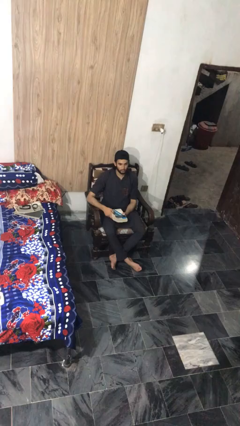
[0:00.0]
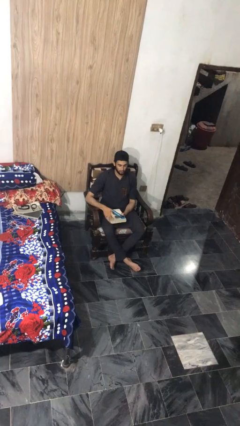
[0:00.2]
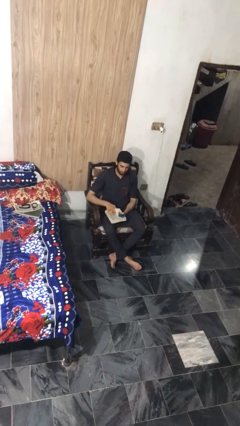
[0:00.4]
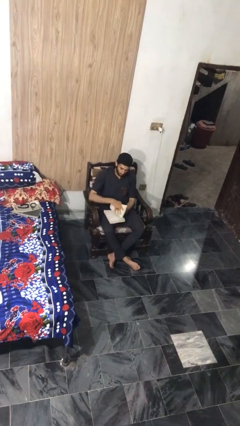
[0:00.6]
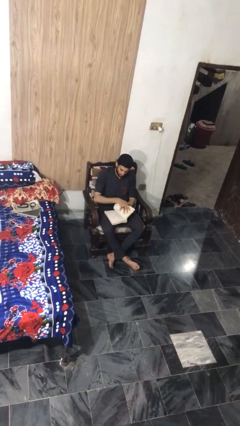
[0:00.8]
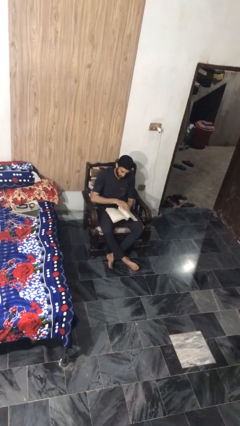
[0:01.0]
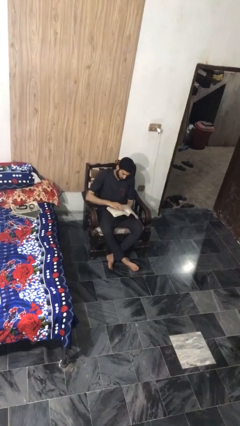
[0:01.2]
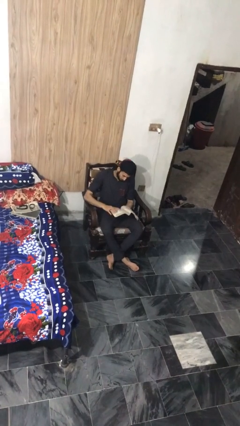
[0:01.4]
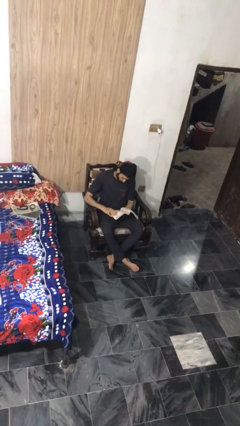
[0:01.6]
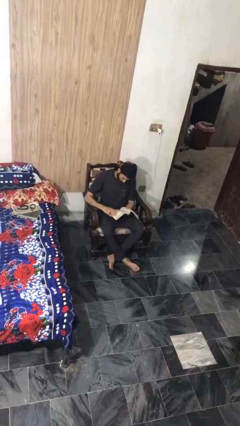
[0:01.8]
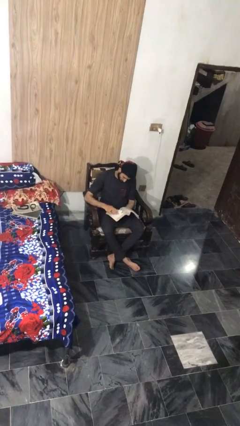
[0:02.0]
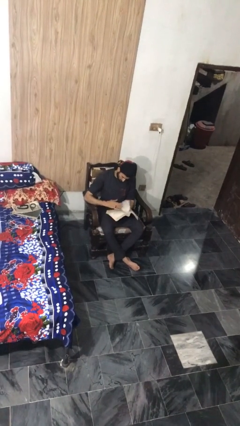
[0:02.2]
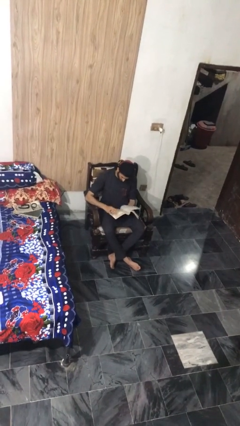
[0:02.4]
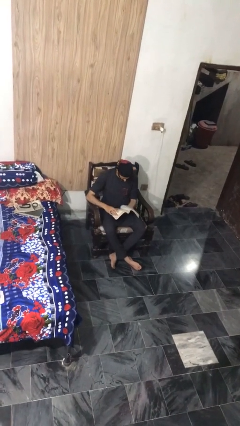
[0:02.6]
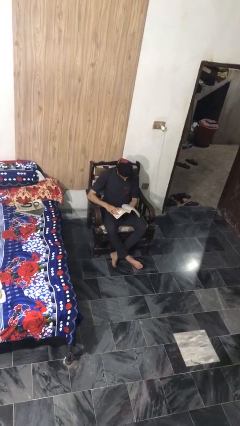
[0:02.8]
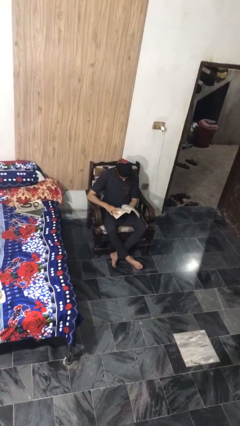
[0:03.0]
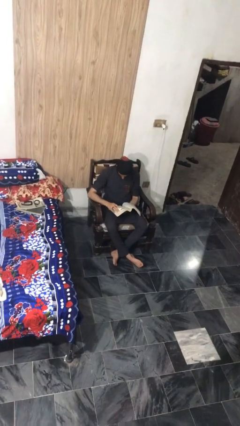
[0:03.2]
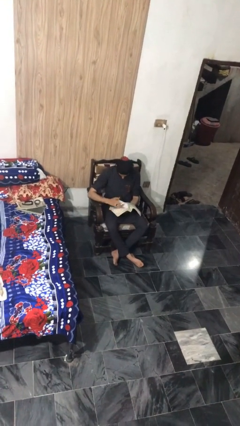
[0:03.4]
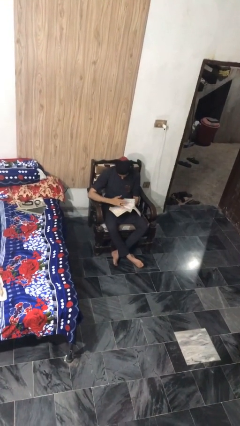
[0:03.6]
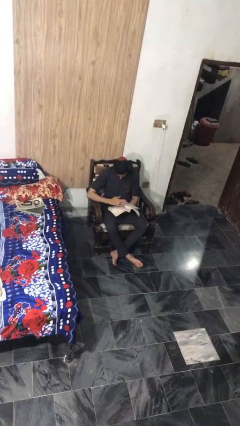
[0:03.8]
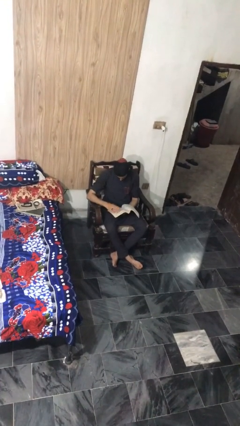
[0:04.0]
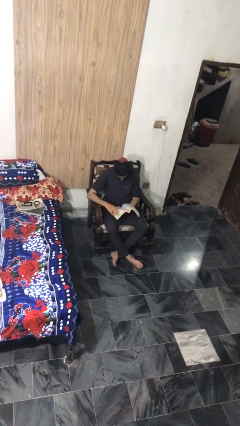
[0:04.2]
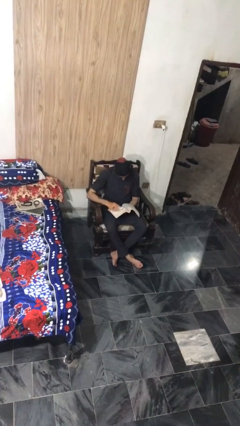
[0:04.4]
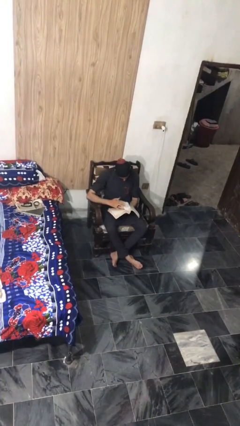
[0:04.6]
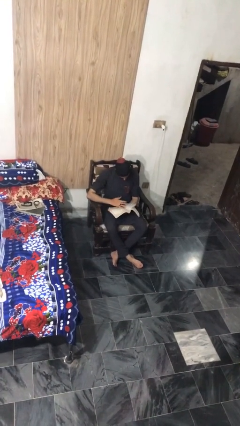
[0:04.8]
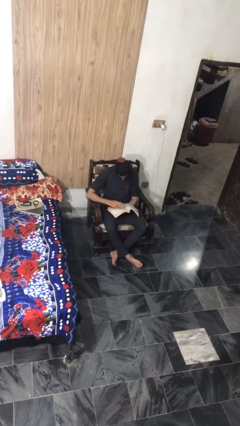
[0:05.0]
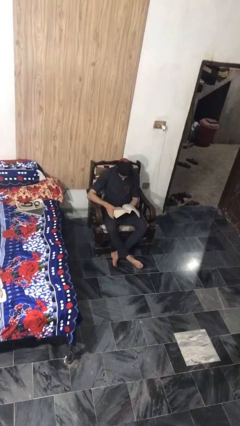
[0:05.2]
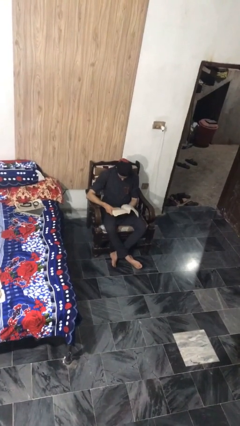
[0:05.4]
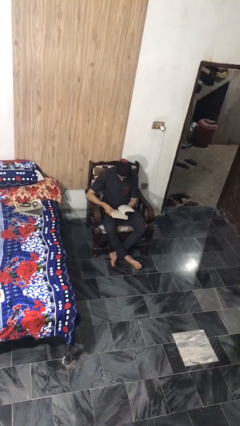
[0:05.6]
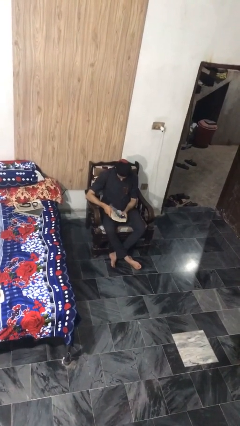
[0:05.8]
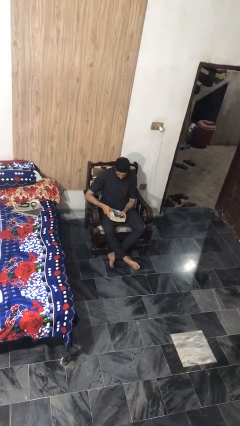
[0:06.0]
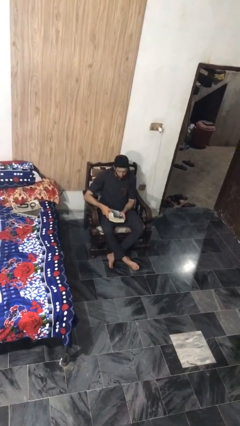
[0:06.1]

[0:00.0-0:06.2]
person reads book

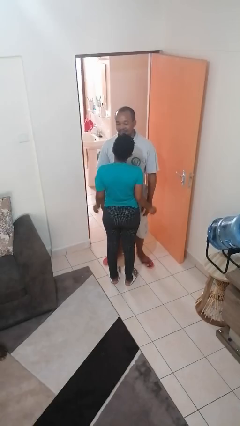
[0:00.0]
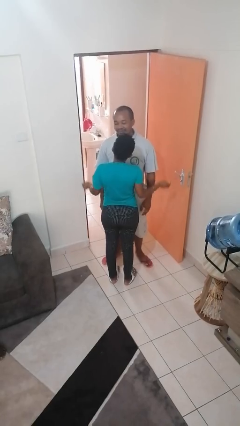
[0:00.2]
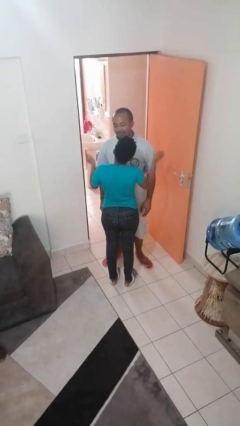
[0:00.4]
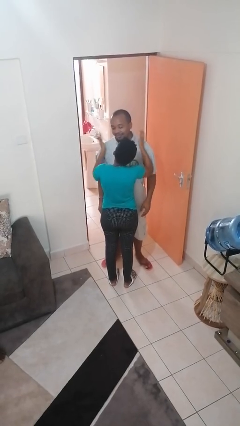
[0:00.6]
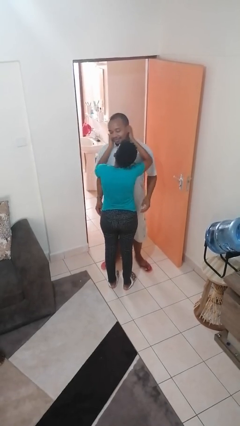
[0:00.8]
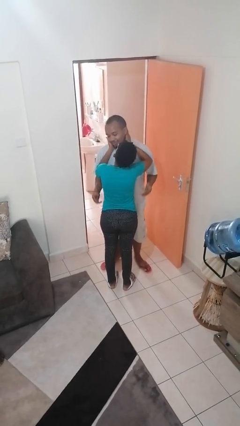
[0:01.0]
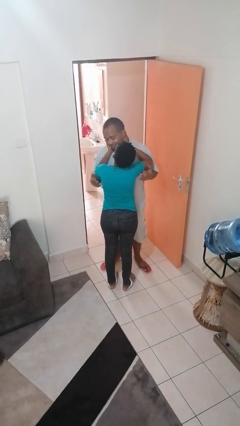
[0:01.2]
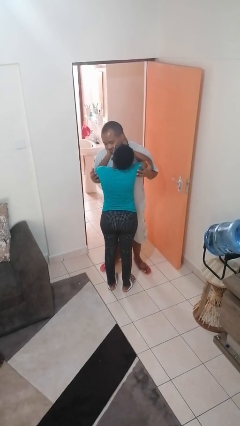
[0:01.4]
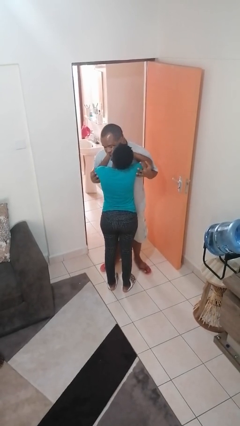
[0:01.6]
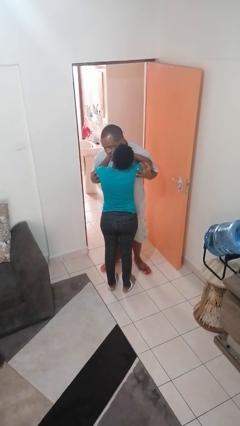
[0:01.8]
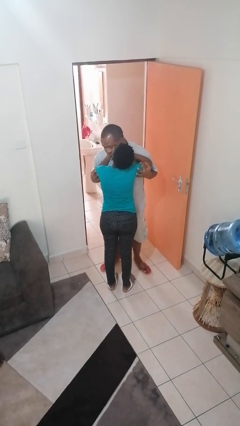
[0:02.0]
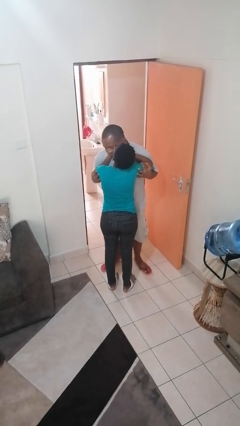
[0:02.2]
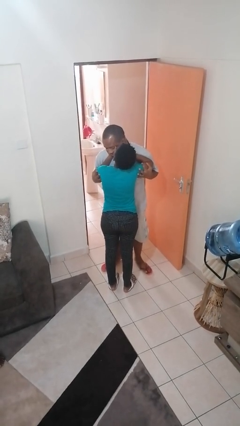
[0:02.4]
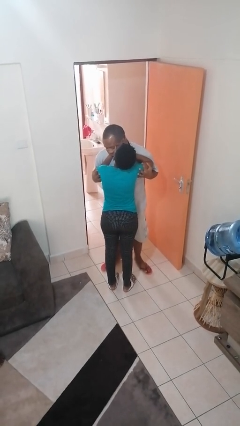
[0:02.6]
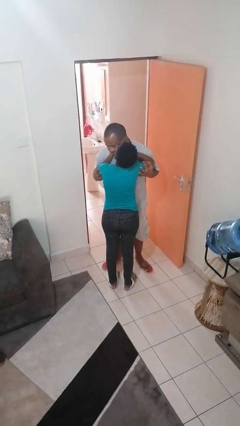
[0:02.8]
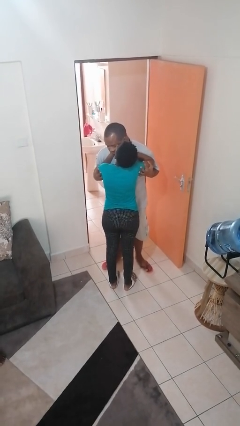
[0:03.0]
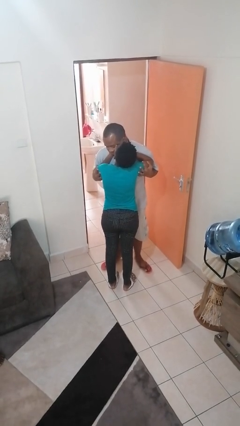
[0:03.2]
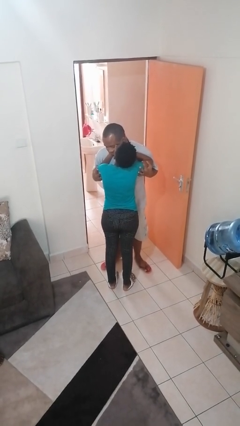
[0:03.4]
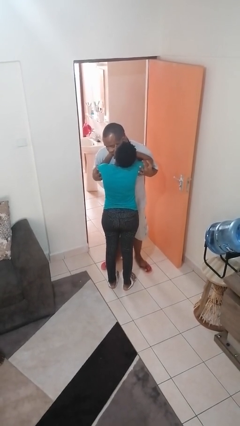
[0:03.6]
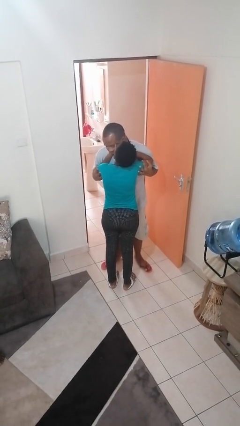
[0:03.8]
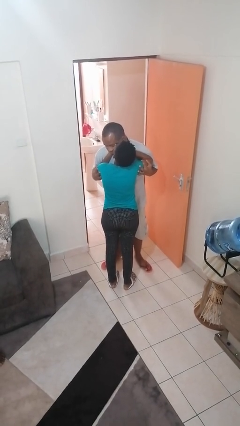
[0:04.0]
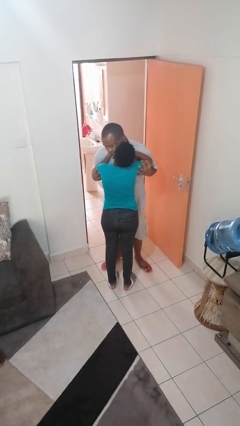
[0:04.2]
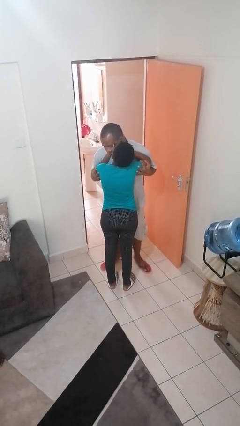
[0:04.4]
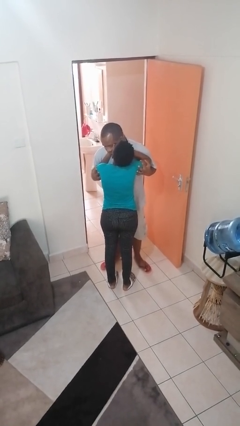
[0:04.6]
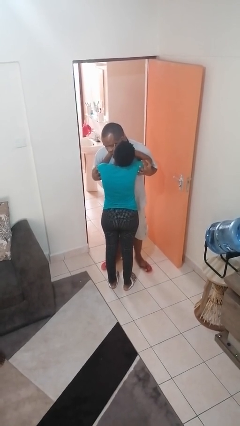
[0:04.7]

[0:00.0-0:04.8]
person kisses cheek of person

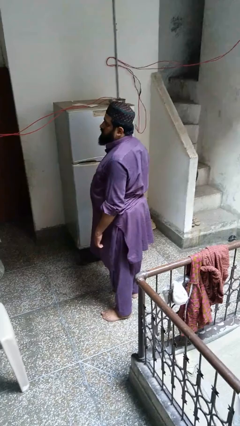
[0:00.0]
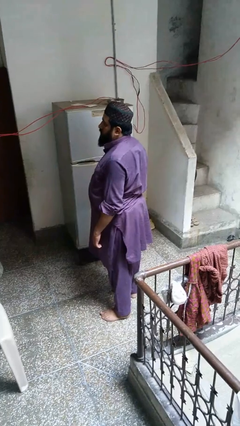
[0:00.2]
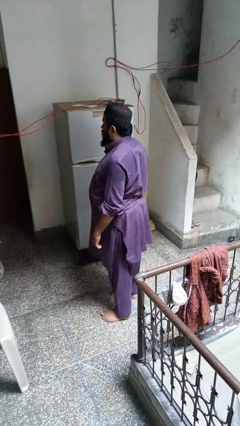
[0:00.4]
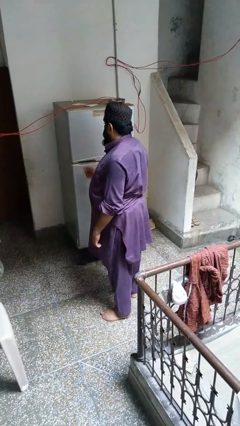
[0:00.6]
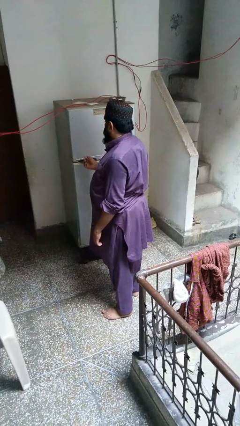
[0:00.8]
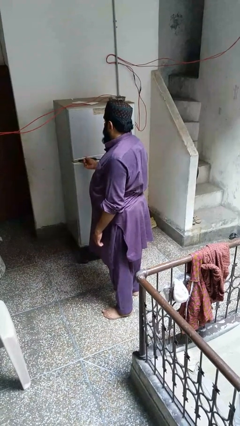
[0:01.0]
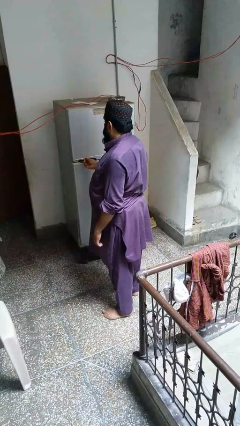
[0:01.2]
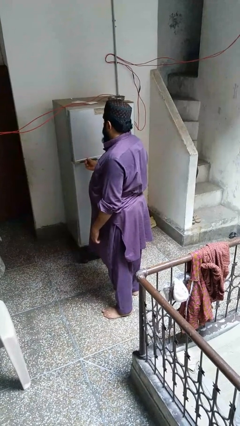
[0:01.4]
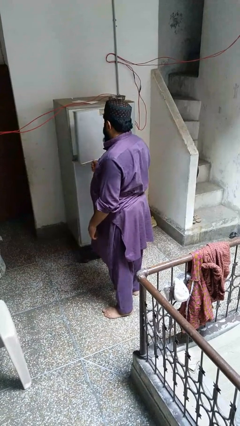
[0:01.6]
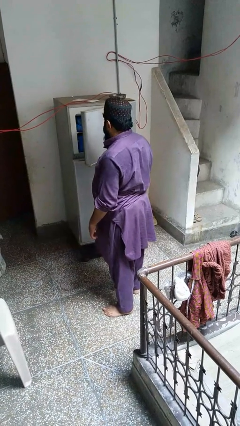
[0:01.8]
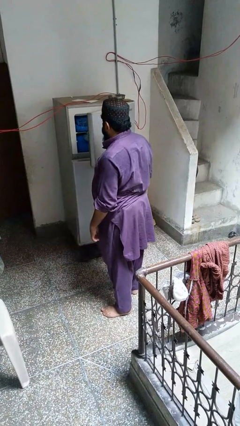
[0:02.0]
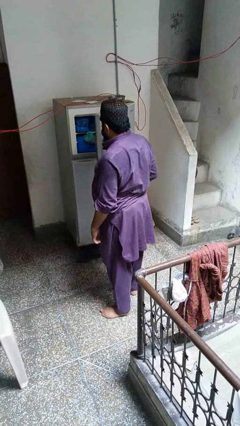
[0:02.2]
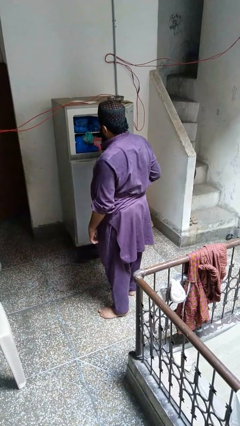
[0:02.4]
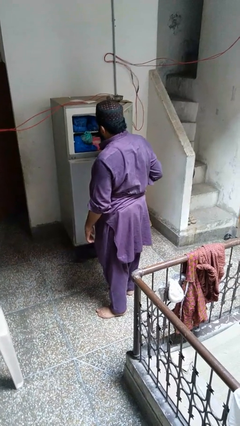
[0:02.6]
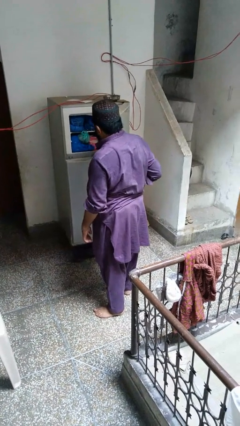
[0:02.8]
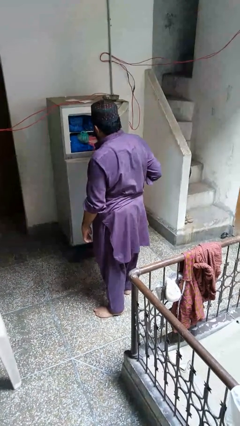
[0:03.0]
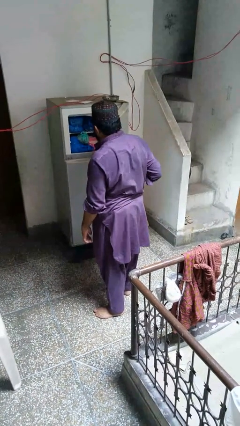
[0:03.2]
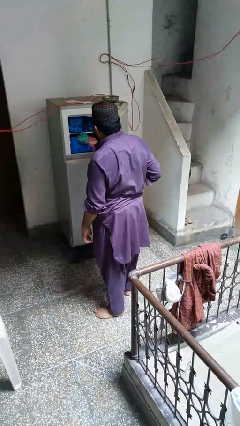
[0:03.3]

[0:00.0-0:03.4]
person opens refrigerator

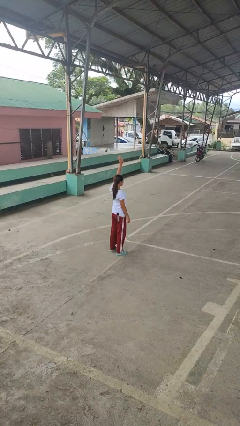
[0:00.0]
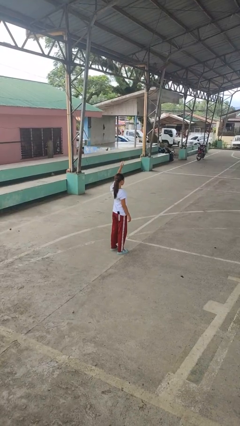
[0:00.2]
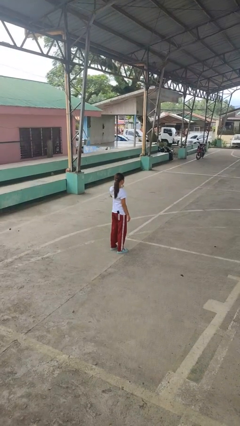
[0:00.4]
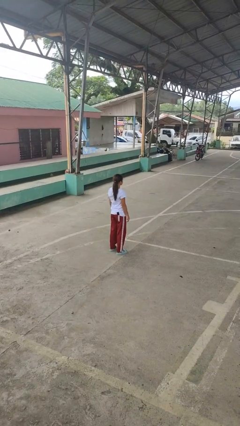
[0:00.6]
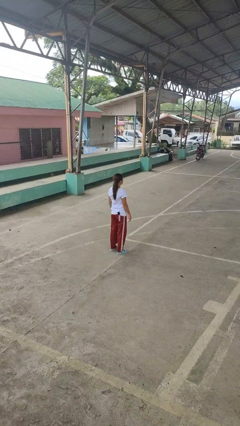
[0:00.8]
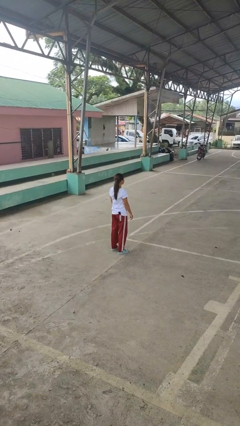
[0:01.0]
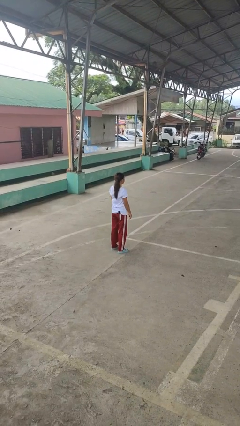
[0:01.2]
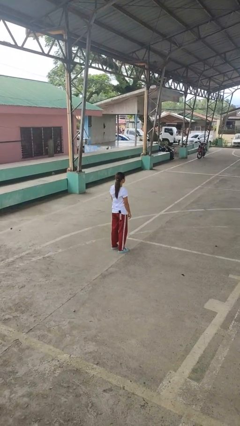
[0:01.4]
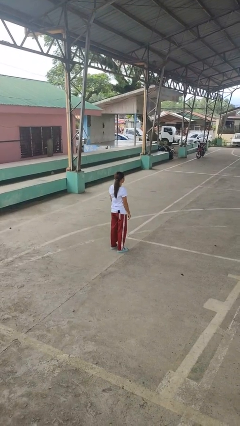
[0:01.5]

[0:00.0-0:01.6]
person gestures lower hand

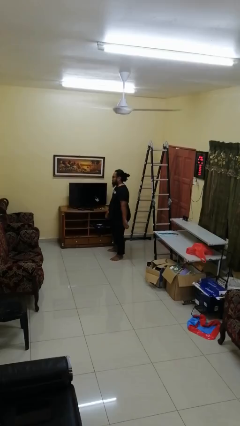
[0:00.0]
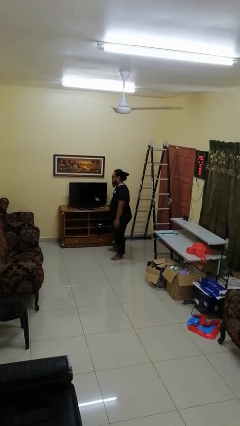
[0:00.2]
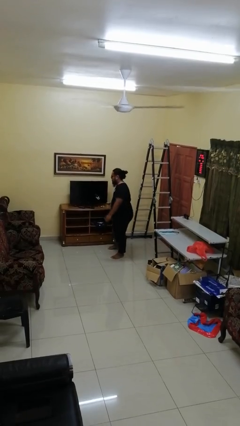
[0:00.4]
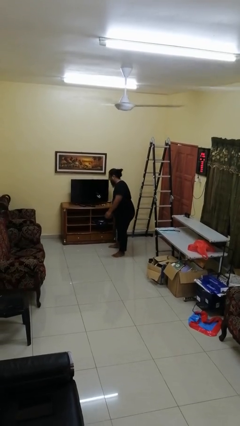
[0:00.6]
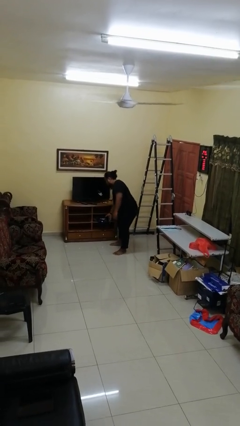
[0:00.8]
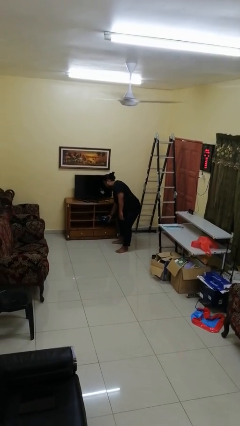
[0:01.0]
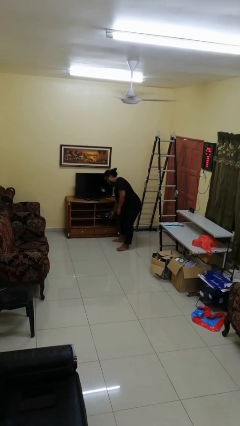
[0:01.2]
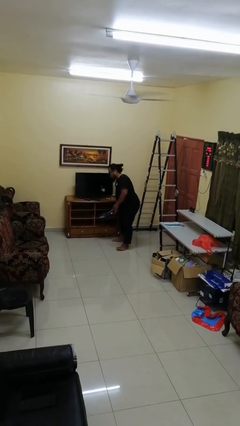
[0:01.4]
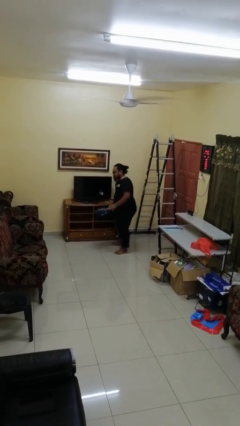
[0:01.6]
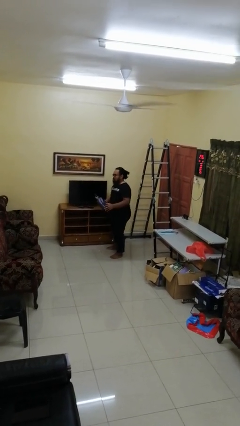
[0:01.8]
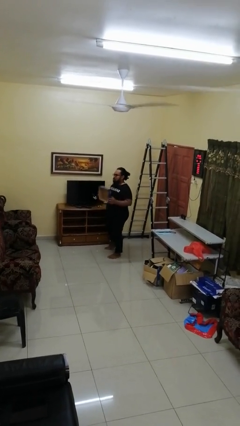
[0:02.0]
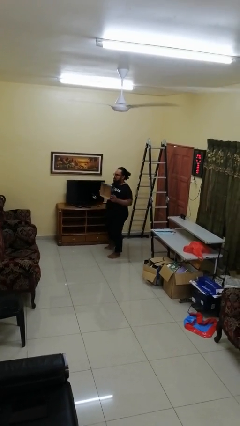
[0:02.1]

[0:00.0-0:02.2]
person picks up object from cabinet
